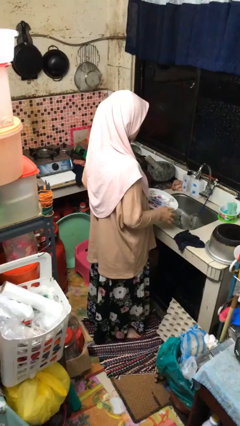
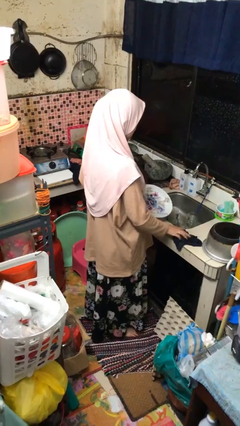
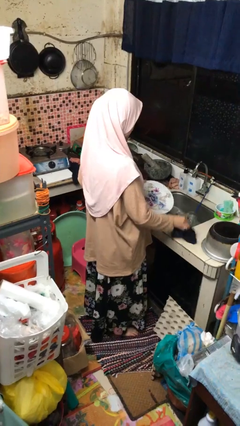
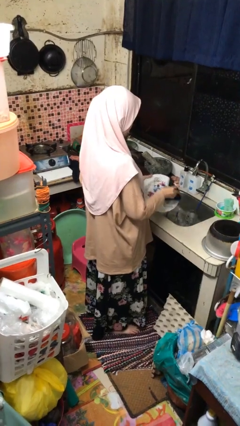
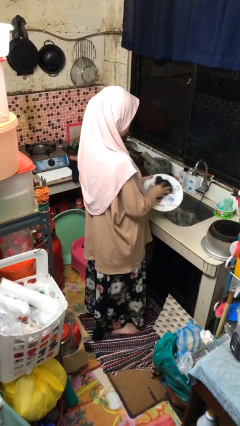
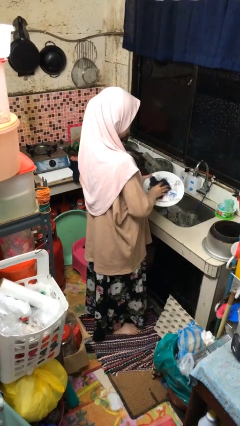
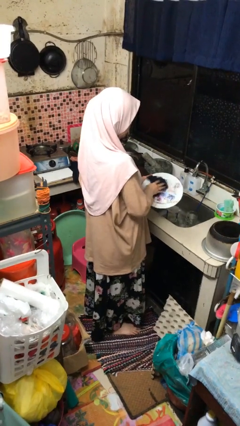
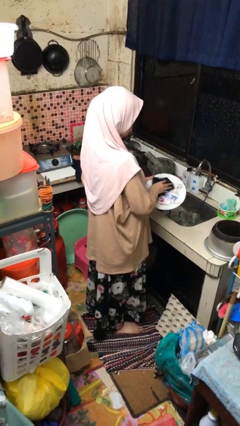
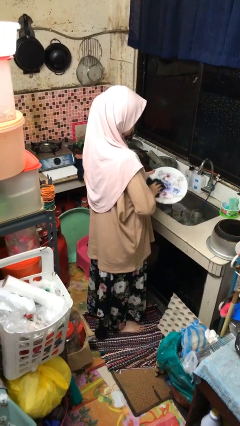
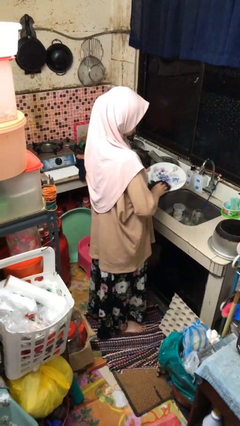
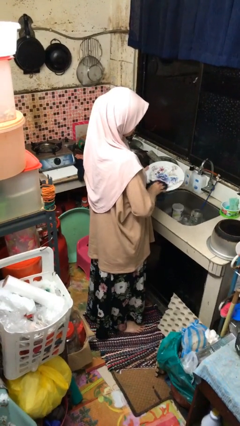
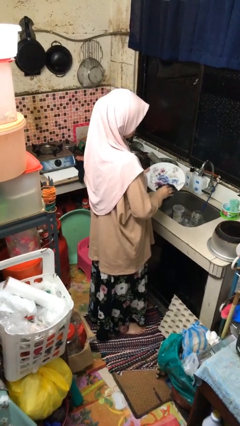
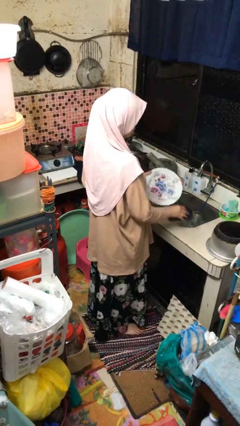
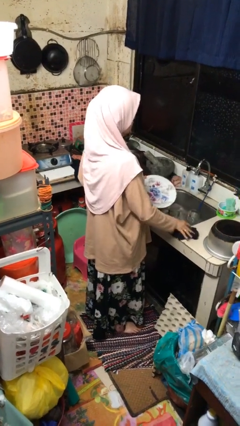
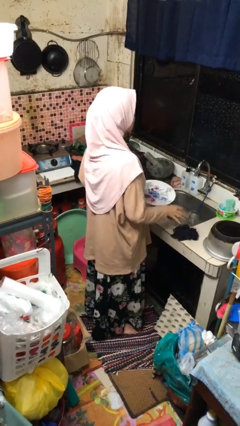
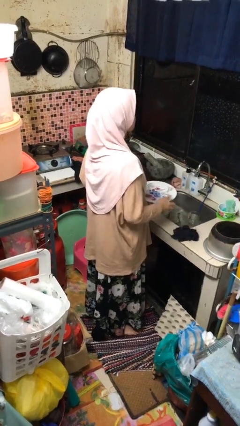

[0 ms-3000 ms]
person dries dish

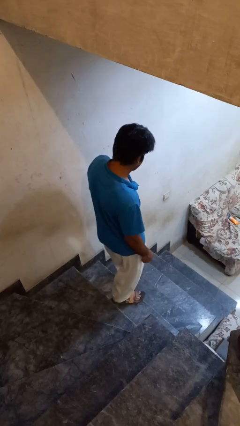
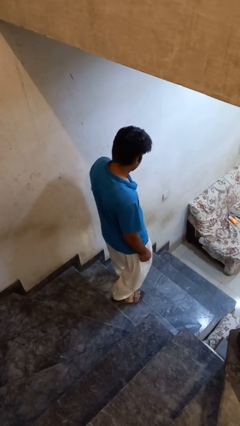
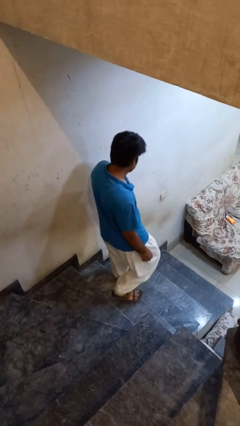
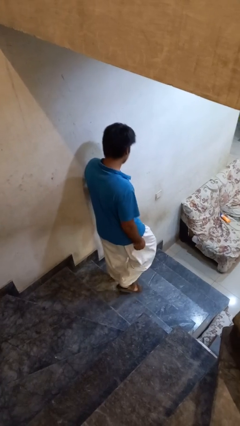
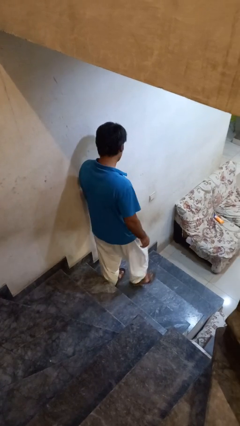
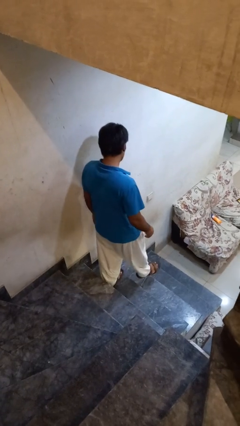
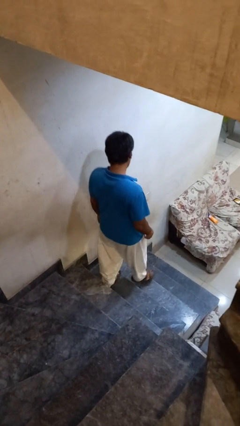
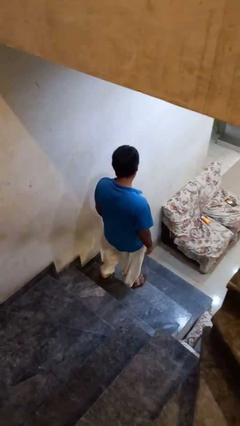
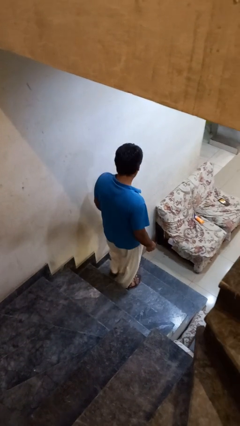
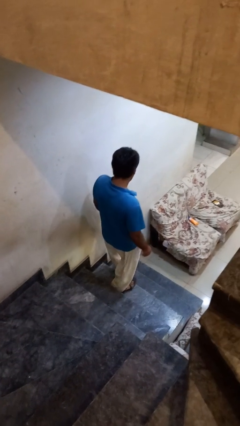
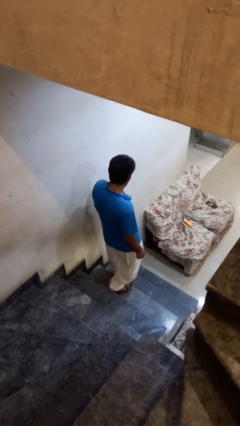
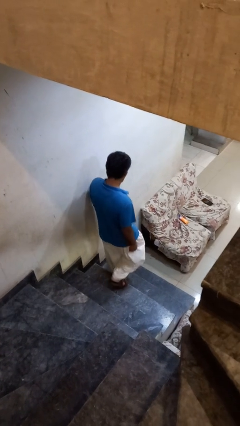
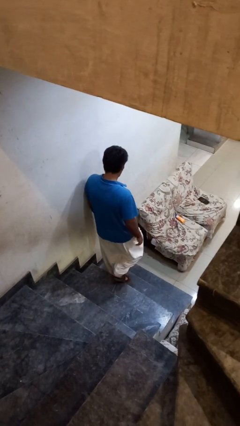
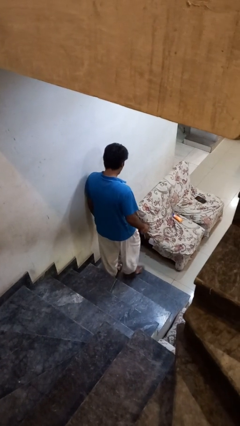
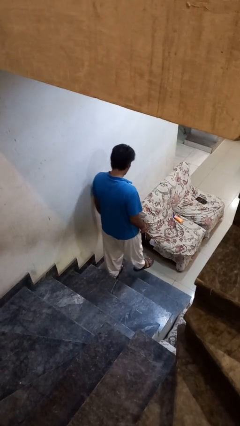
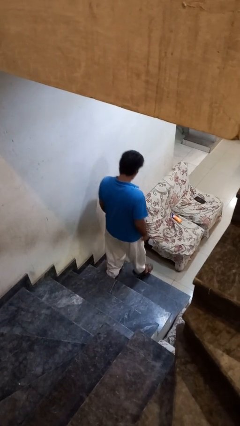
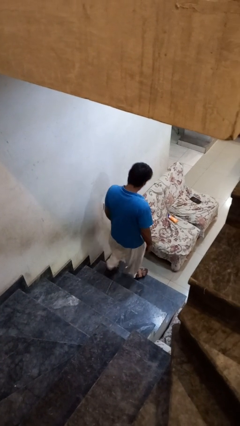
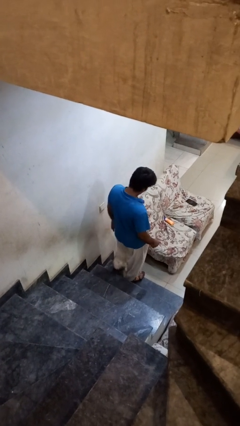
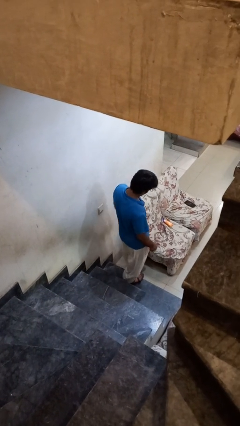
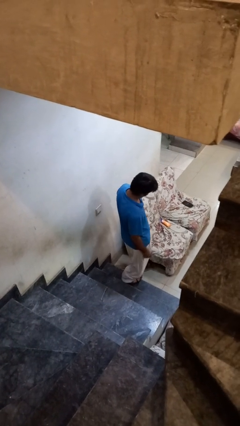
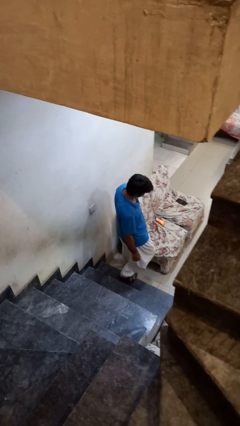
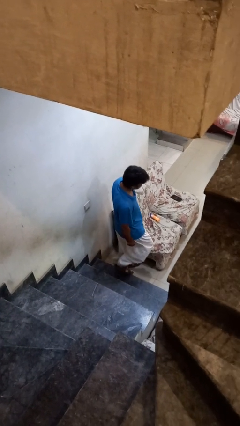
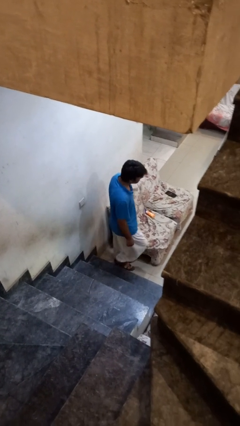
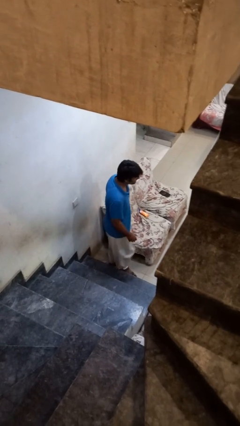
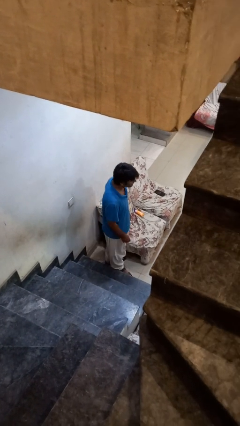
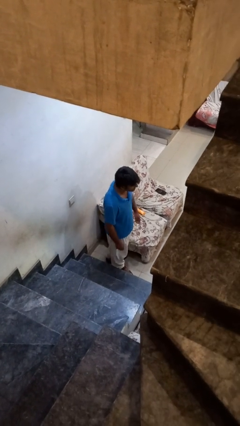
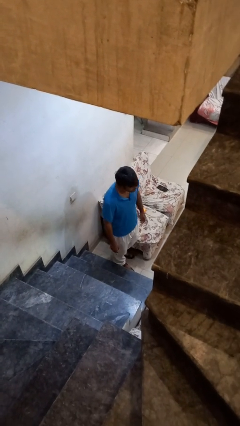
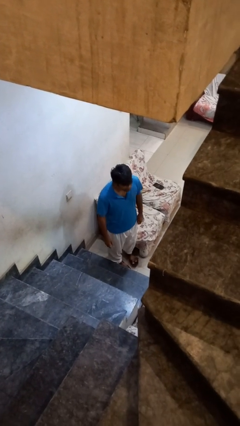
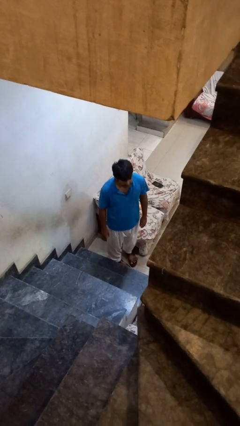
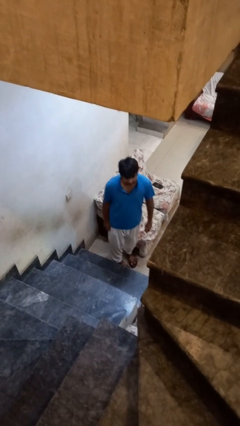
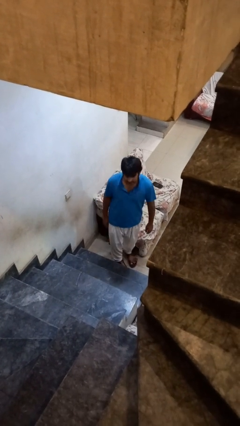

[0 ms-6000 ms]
person climbs down stairs

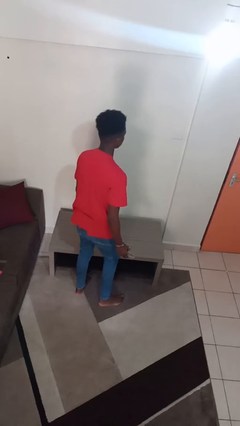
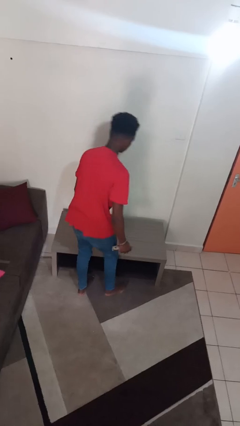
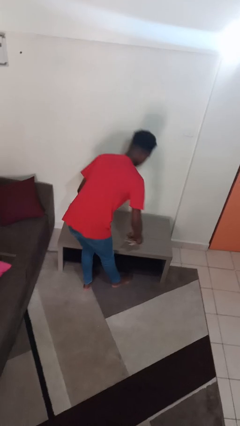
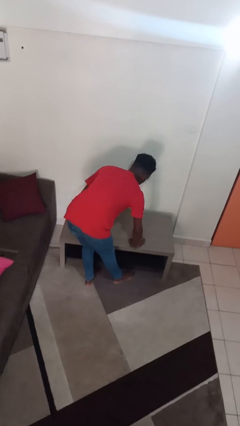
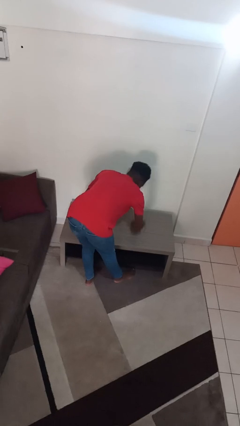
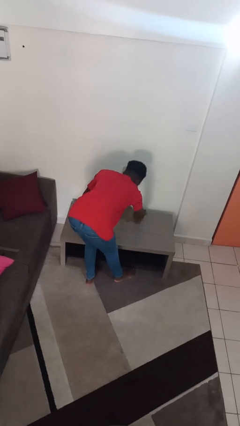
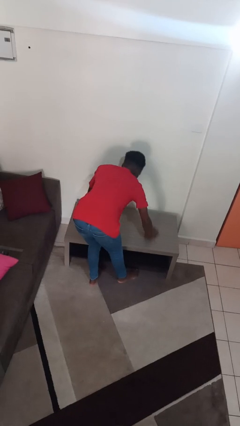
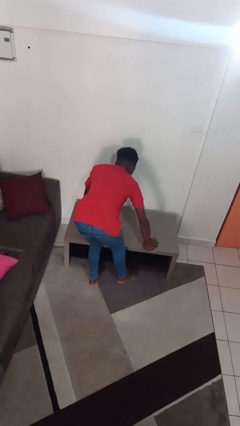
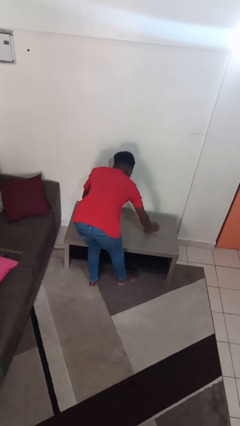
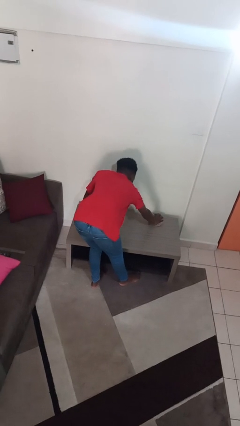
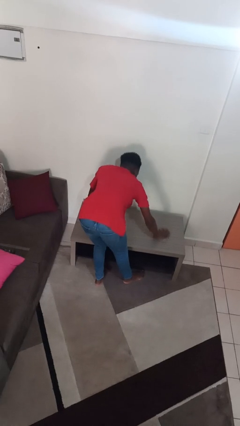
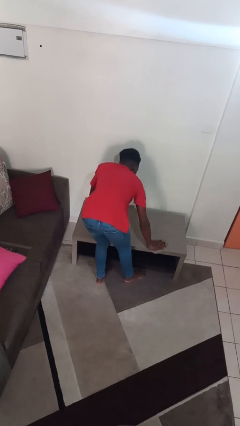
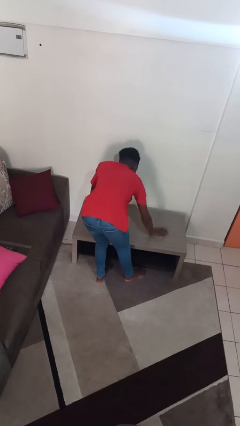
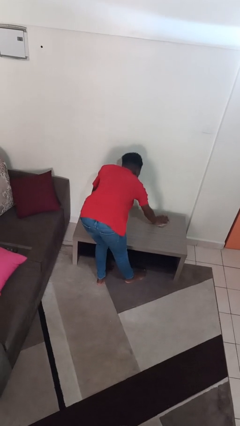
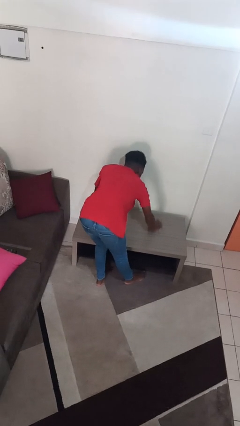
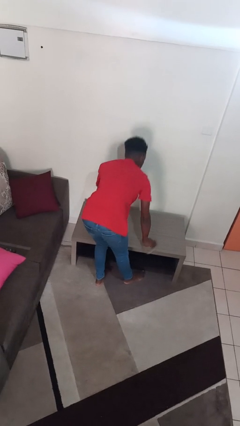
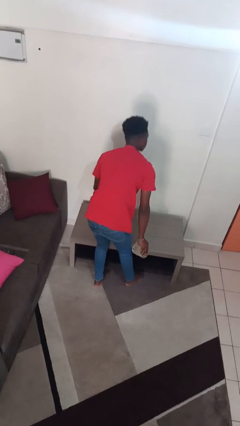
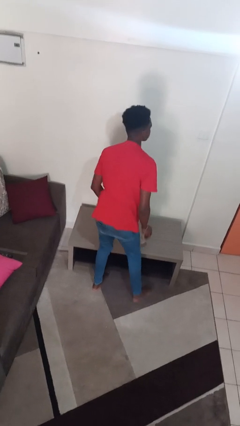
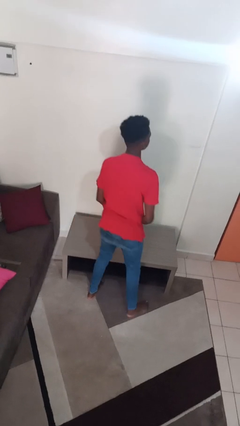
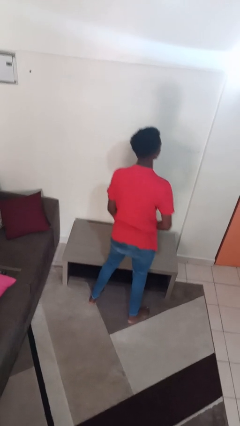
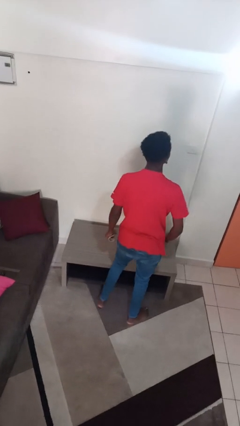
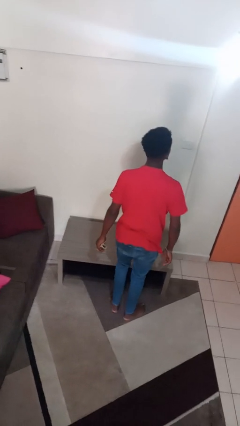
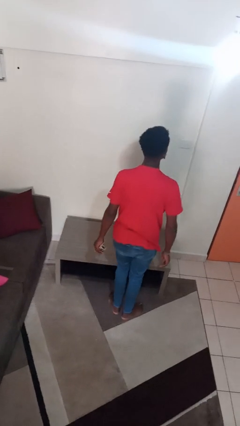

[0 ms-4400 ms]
person cleans table with rag

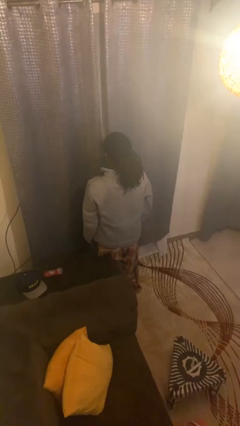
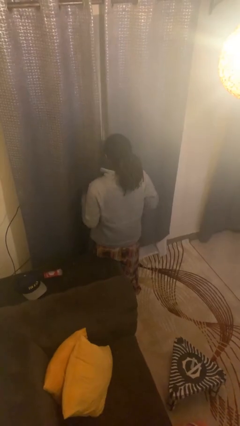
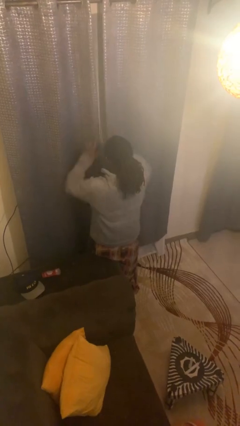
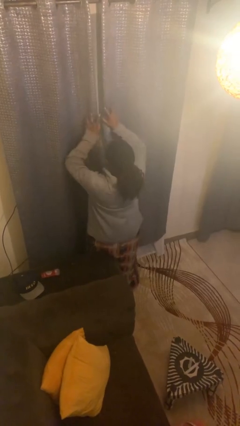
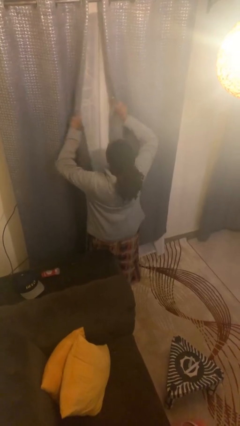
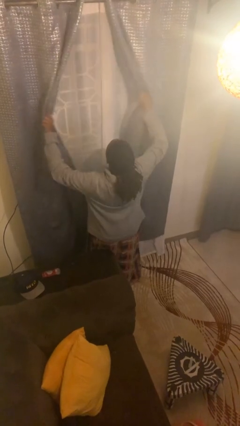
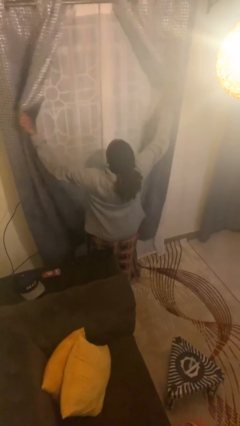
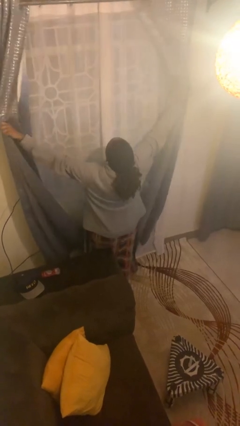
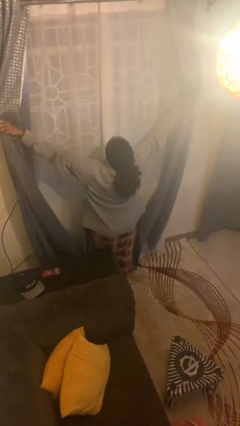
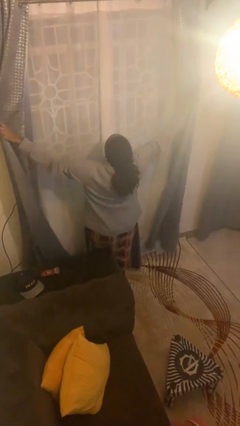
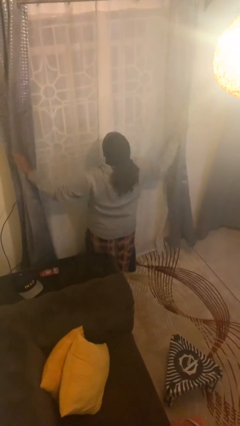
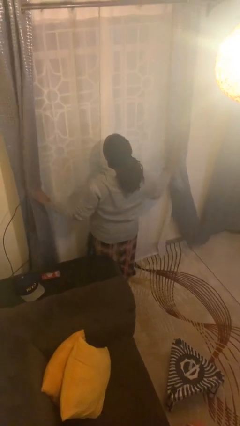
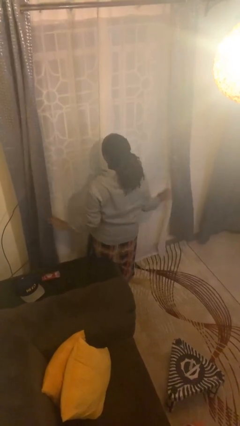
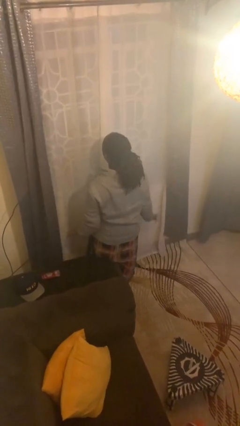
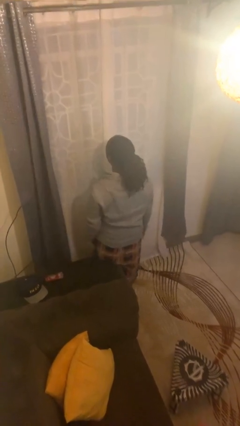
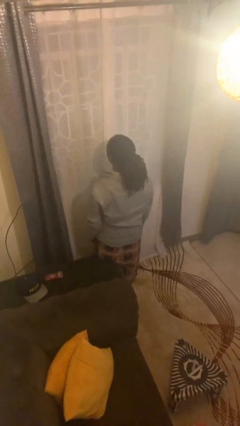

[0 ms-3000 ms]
person opens curtains

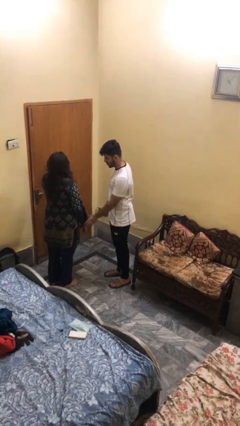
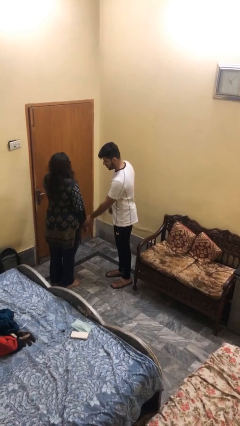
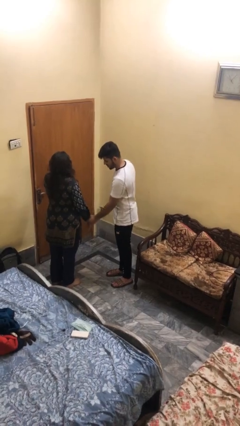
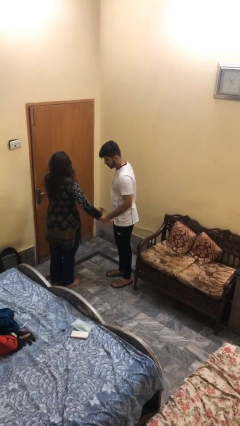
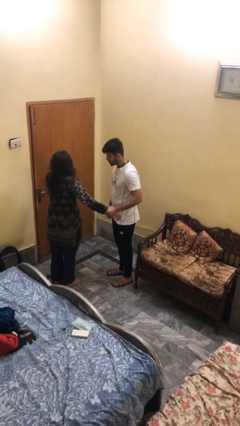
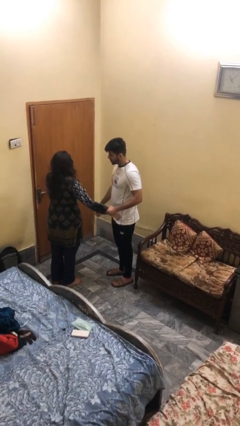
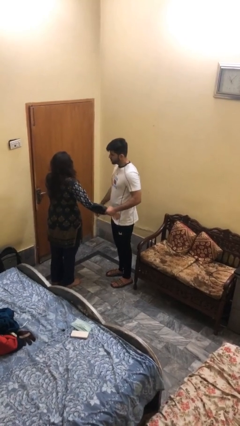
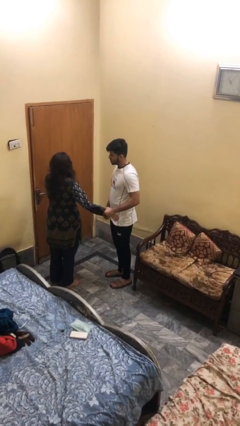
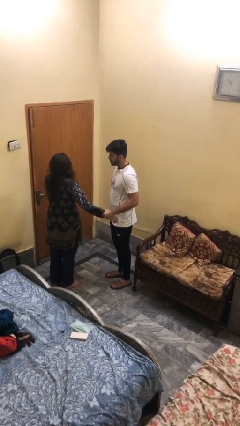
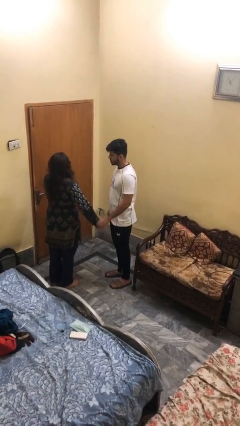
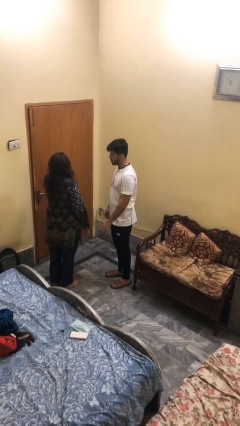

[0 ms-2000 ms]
person grabs person by forearm
